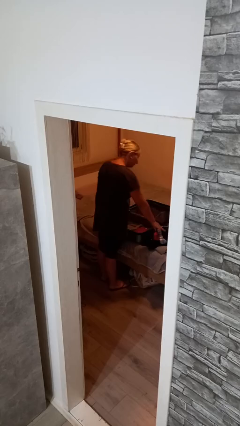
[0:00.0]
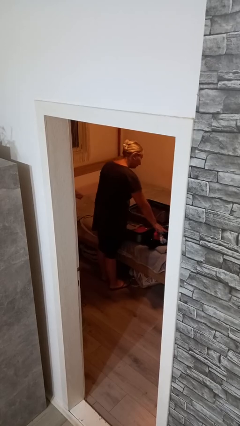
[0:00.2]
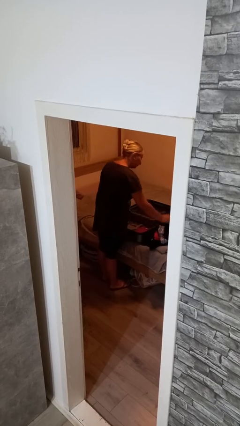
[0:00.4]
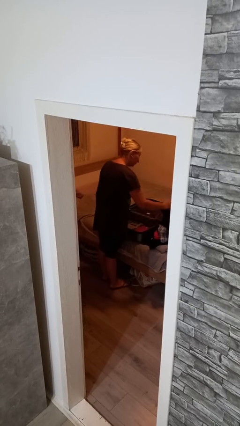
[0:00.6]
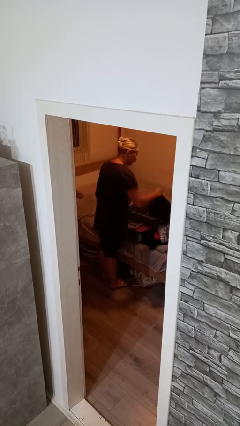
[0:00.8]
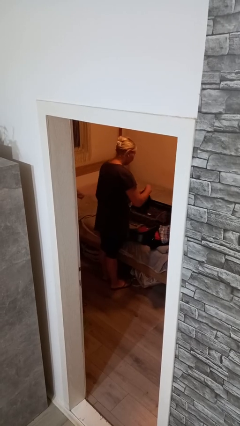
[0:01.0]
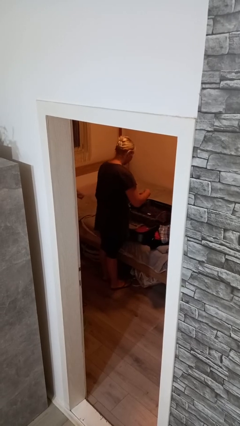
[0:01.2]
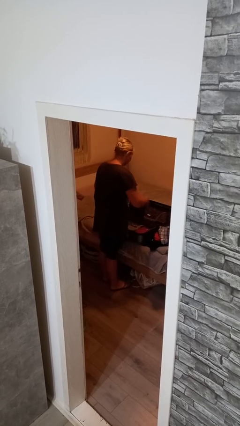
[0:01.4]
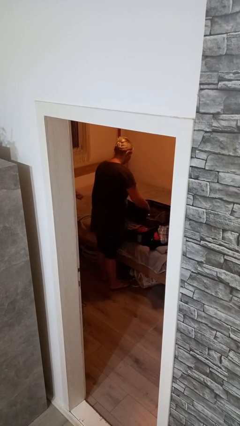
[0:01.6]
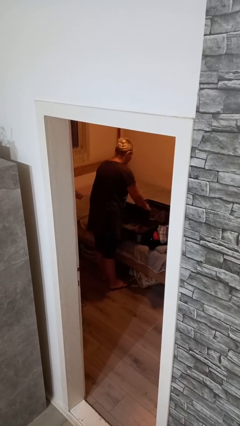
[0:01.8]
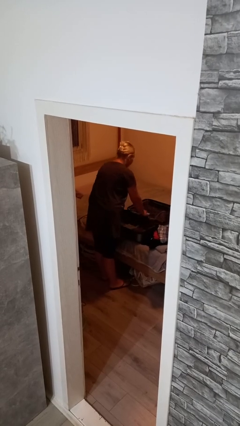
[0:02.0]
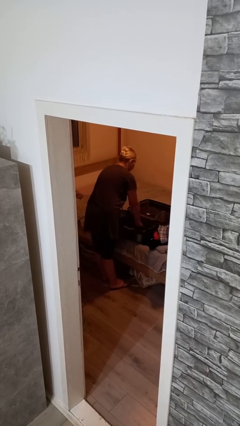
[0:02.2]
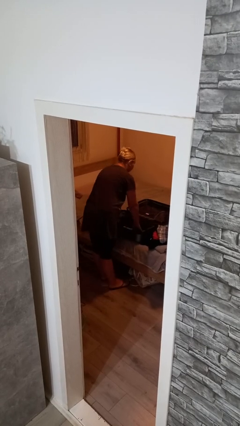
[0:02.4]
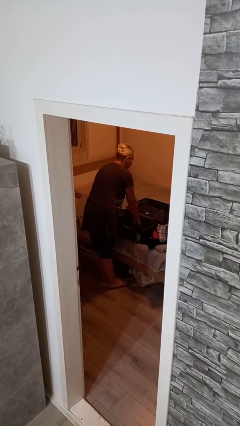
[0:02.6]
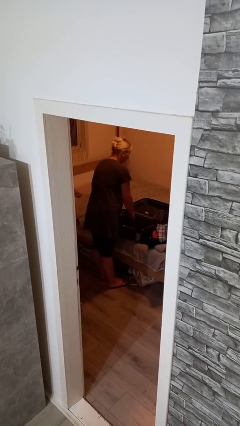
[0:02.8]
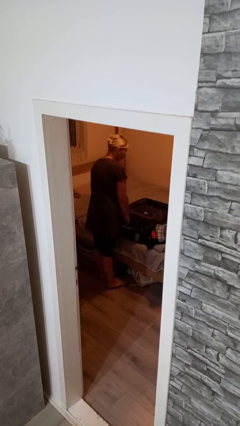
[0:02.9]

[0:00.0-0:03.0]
person loads clothes into suitcase

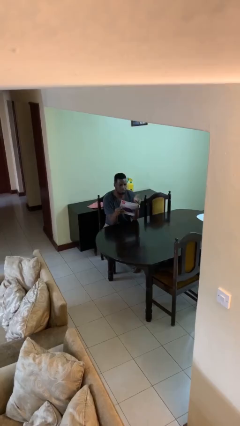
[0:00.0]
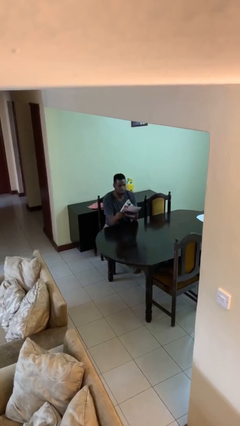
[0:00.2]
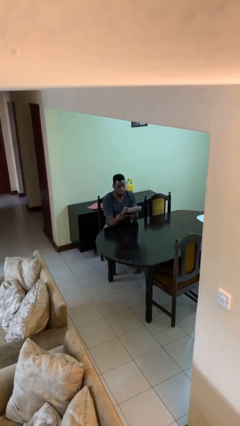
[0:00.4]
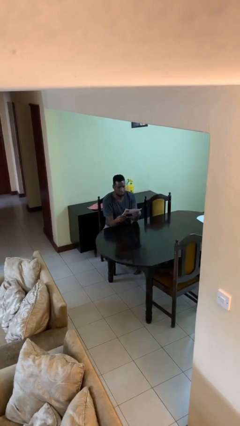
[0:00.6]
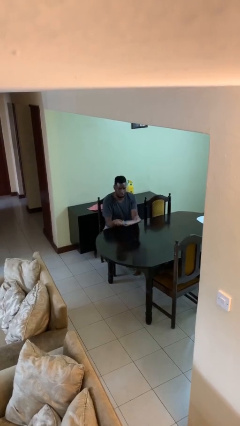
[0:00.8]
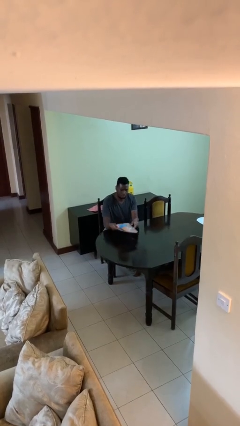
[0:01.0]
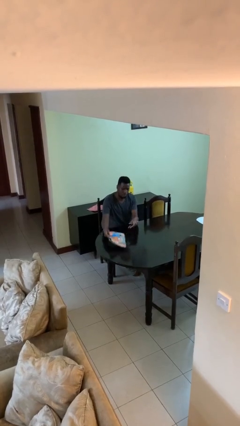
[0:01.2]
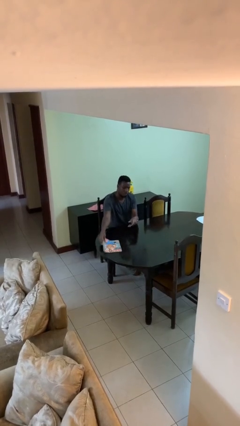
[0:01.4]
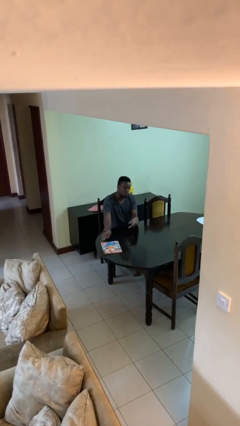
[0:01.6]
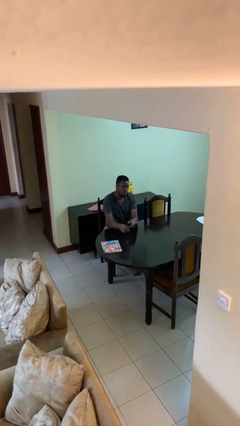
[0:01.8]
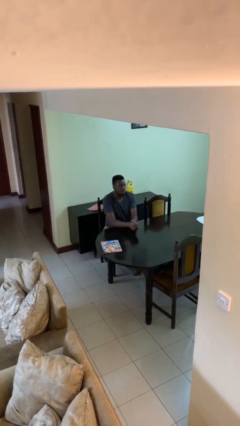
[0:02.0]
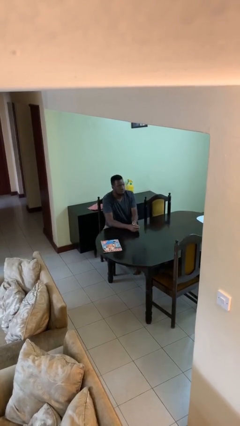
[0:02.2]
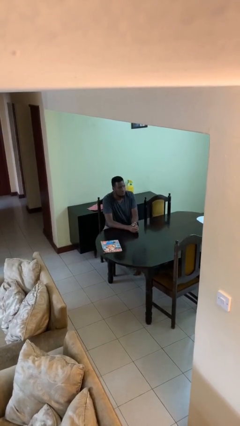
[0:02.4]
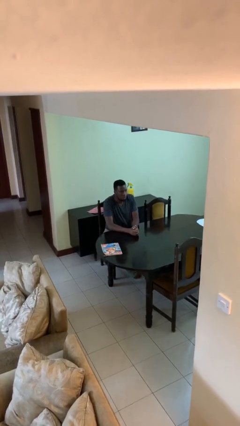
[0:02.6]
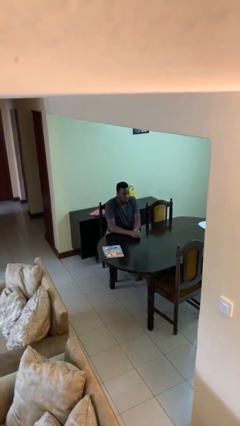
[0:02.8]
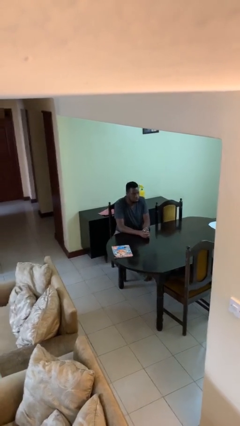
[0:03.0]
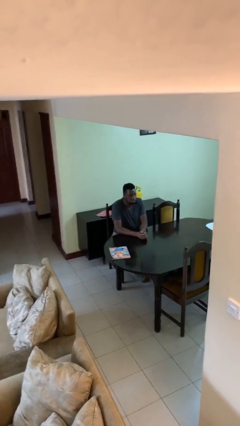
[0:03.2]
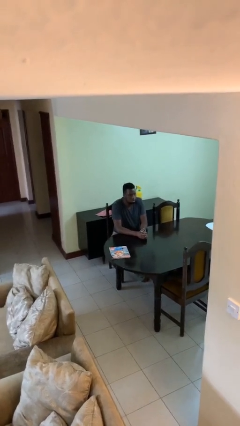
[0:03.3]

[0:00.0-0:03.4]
person puts down object on table

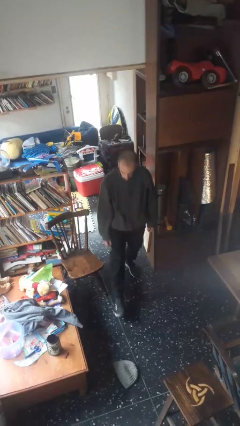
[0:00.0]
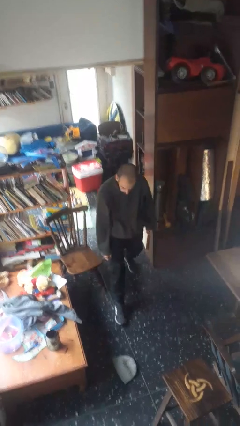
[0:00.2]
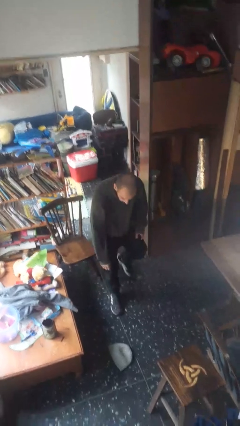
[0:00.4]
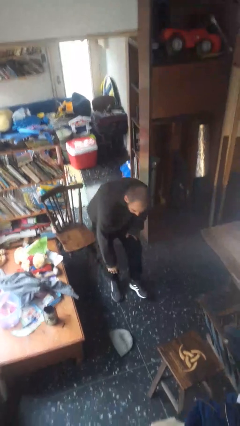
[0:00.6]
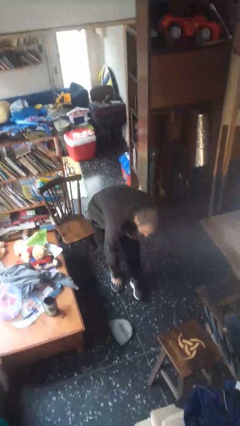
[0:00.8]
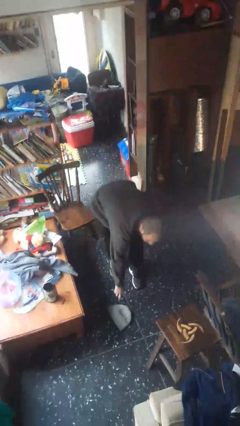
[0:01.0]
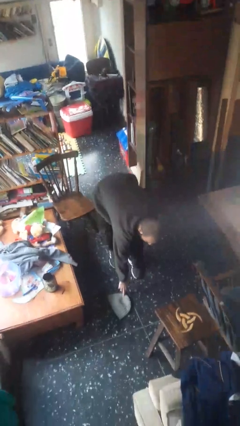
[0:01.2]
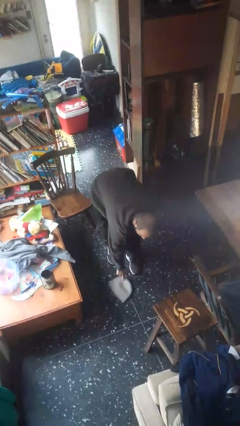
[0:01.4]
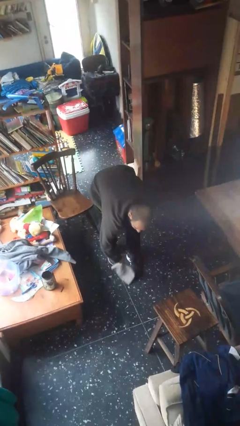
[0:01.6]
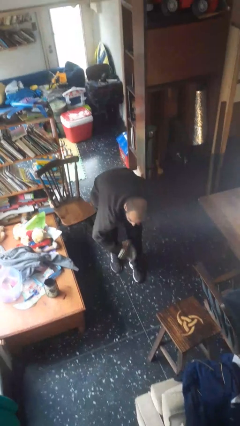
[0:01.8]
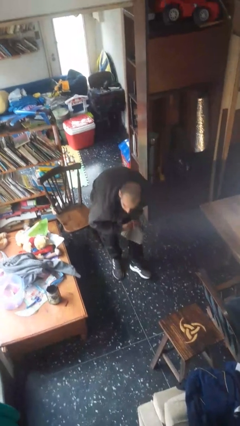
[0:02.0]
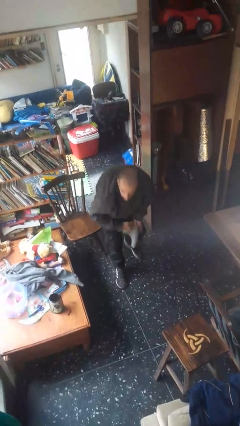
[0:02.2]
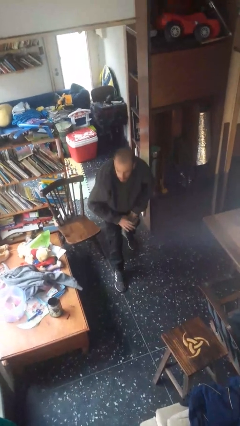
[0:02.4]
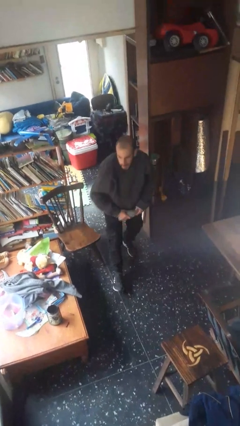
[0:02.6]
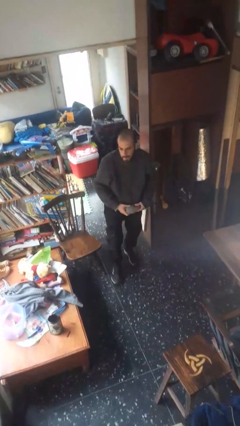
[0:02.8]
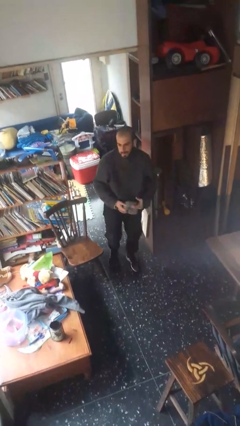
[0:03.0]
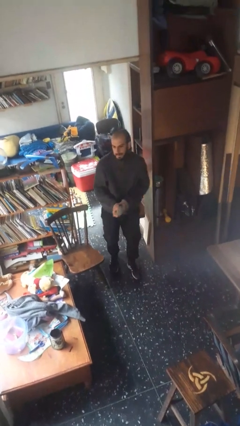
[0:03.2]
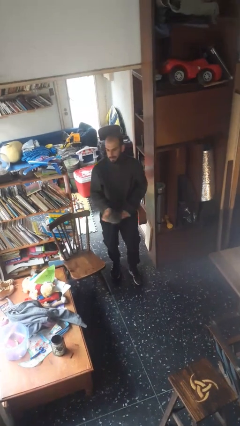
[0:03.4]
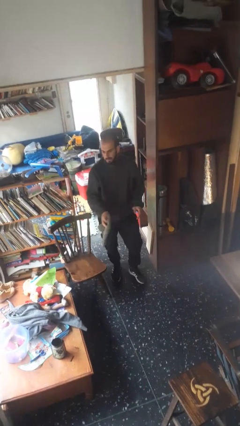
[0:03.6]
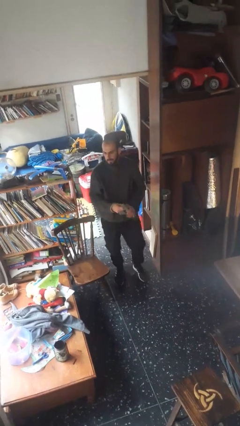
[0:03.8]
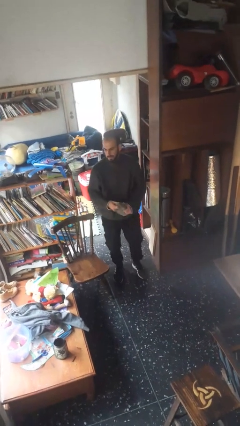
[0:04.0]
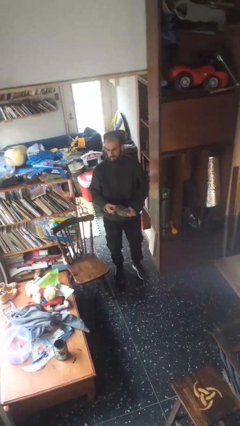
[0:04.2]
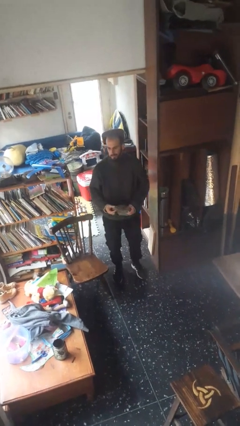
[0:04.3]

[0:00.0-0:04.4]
person picks up object from floor

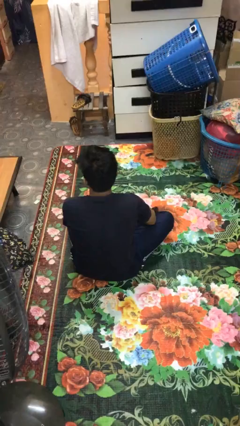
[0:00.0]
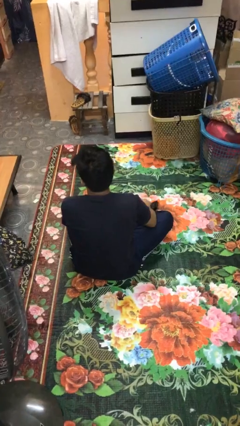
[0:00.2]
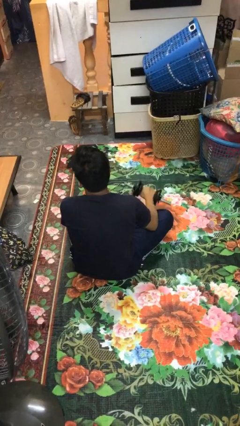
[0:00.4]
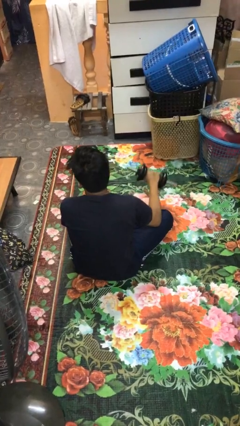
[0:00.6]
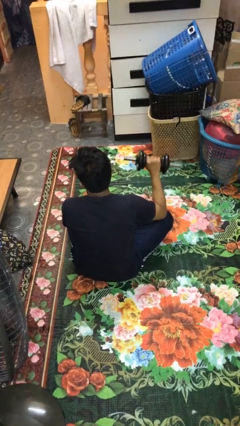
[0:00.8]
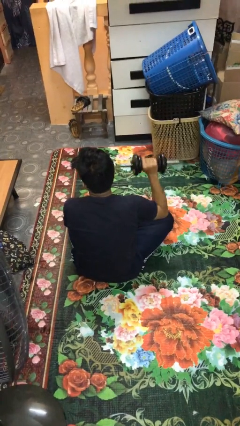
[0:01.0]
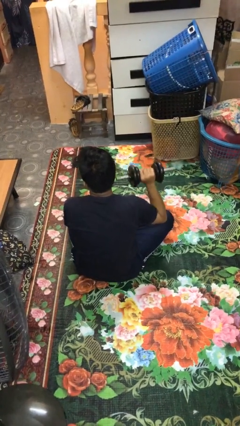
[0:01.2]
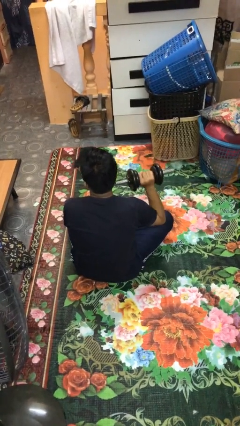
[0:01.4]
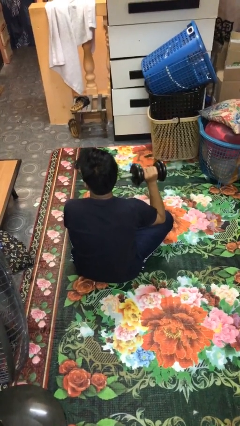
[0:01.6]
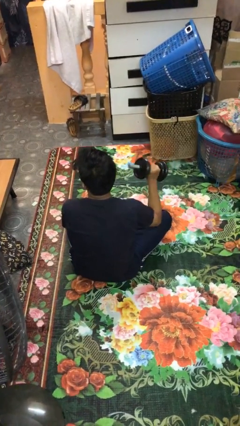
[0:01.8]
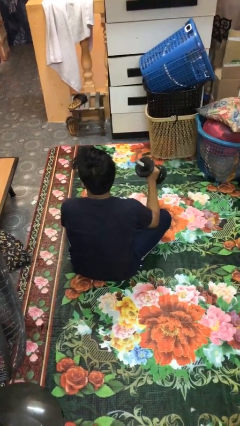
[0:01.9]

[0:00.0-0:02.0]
person lifts dumbbells

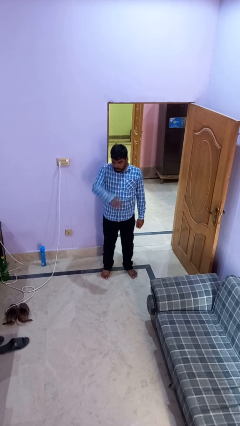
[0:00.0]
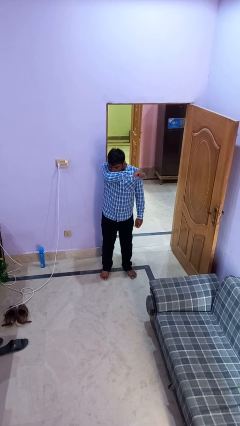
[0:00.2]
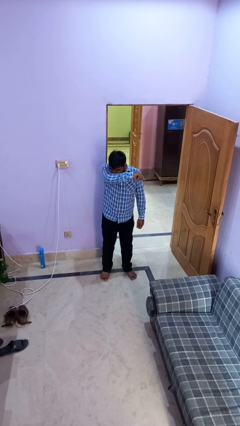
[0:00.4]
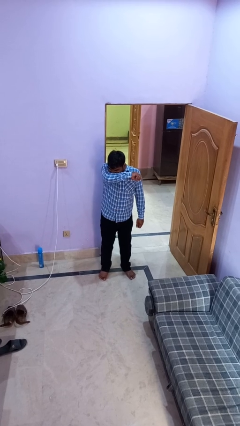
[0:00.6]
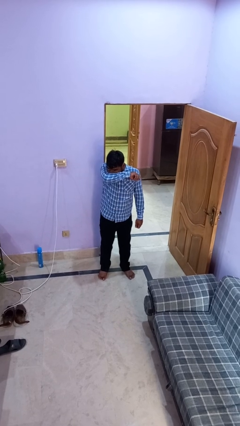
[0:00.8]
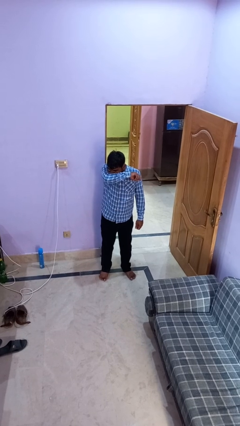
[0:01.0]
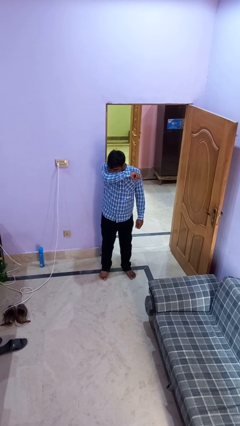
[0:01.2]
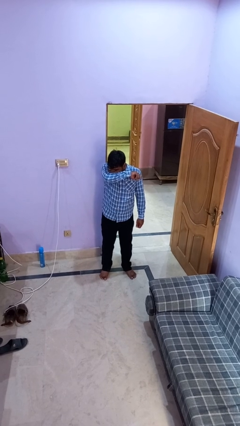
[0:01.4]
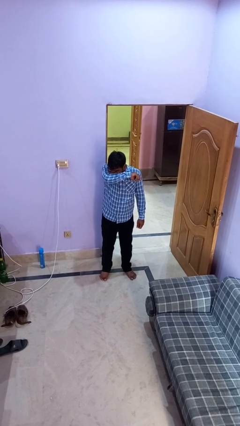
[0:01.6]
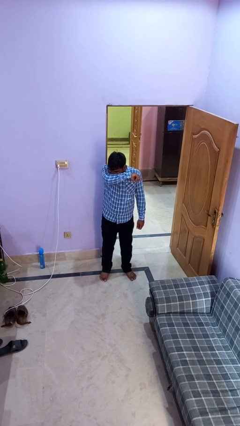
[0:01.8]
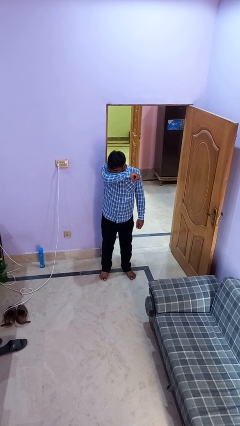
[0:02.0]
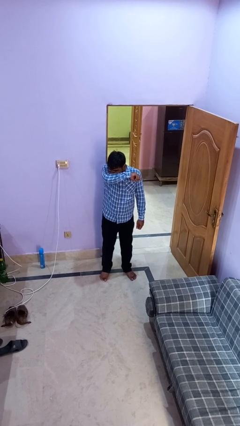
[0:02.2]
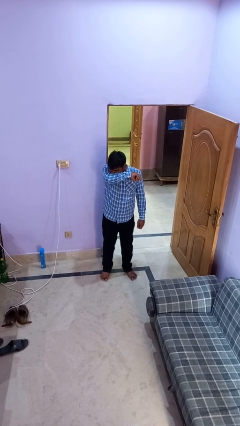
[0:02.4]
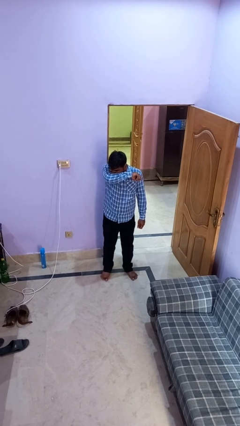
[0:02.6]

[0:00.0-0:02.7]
person sneezes into arm

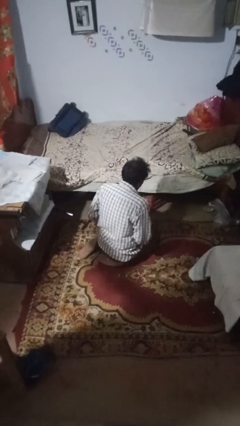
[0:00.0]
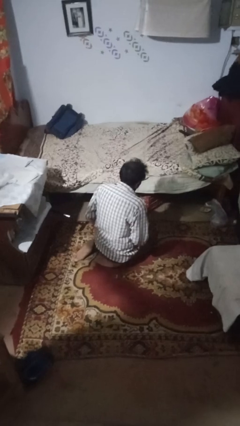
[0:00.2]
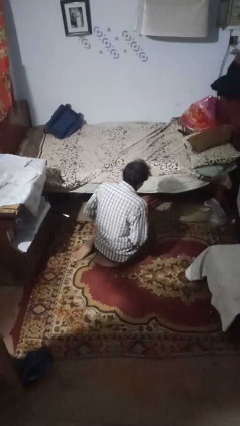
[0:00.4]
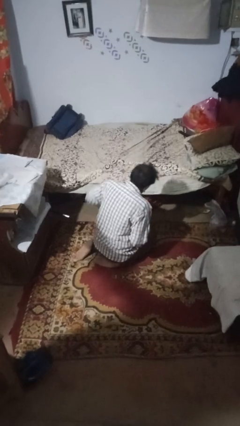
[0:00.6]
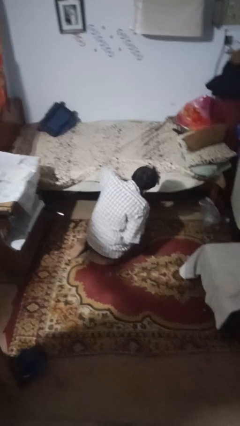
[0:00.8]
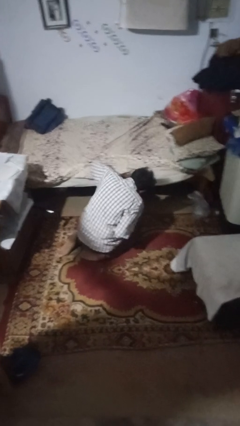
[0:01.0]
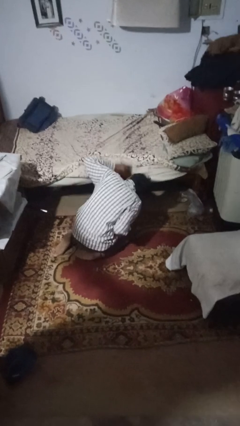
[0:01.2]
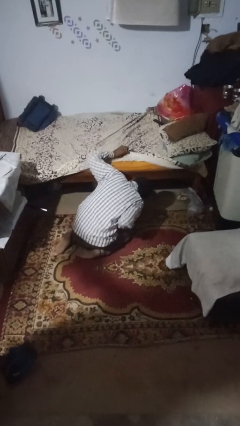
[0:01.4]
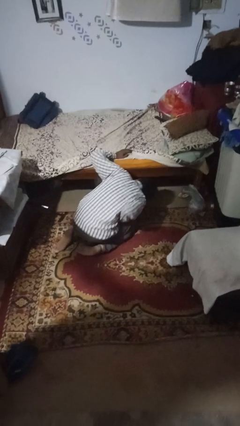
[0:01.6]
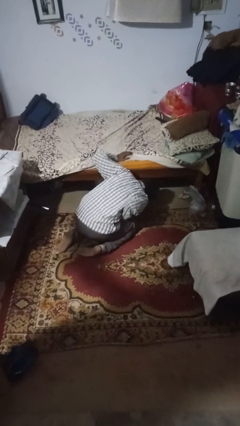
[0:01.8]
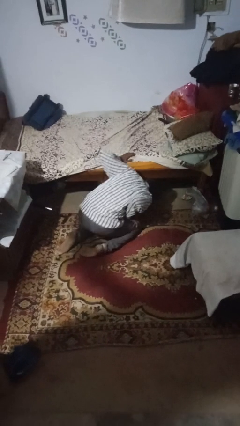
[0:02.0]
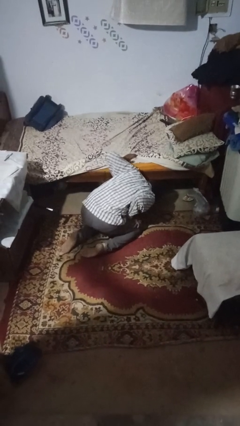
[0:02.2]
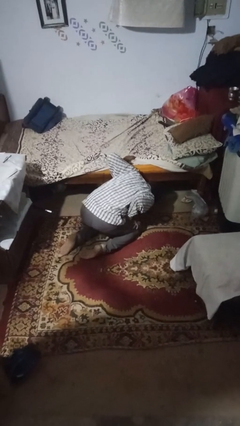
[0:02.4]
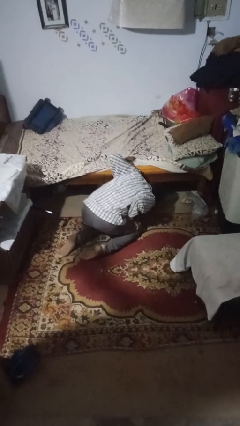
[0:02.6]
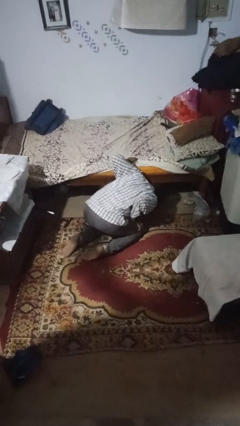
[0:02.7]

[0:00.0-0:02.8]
person searches under bed
